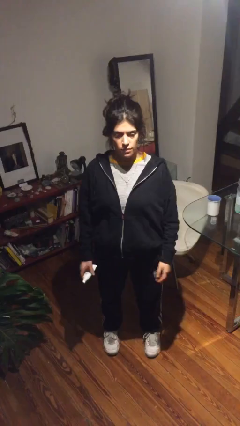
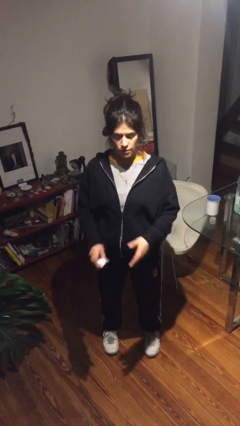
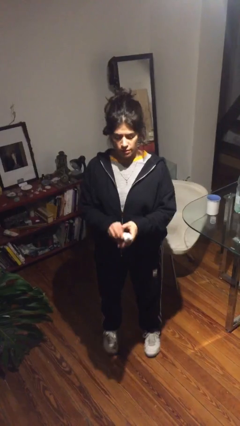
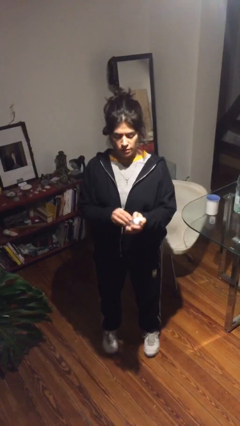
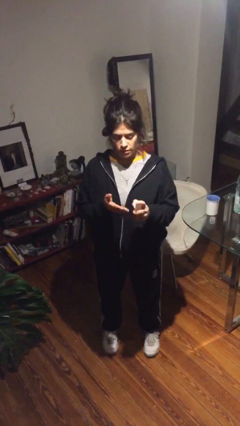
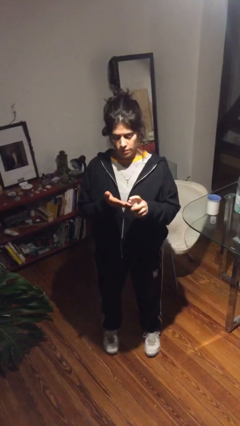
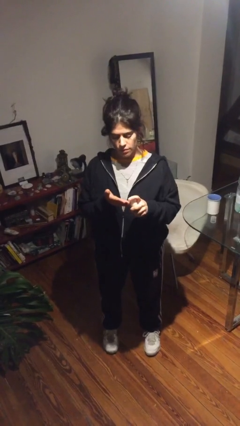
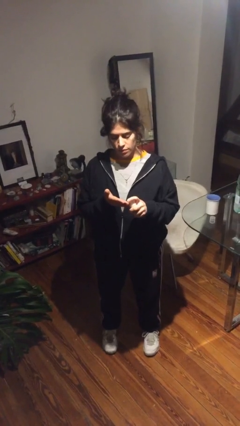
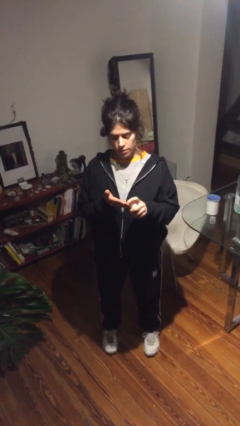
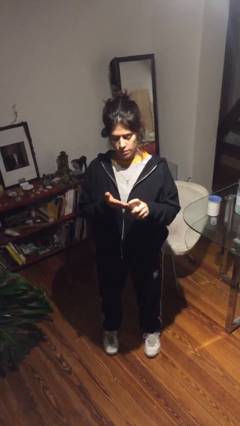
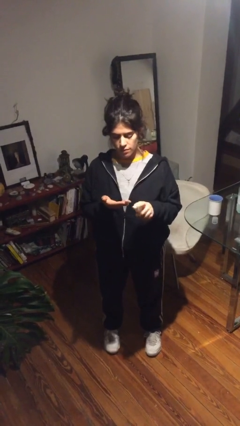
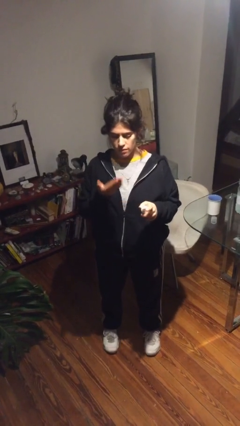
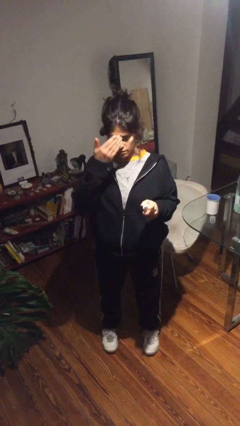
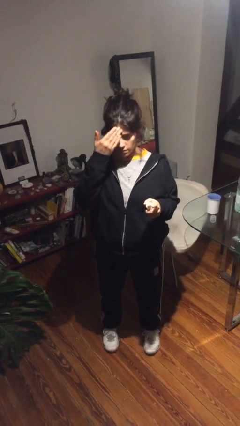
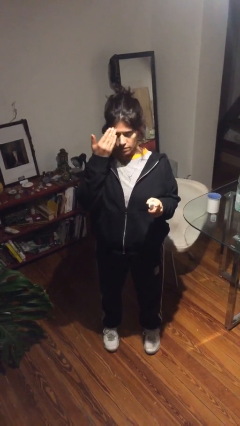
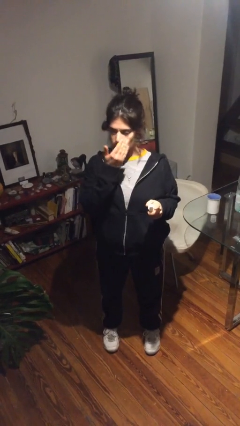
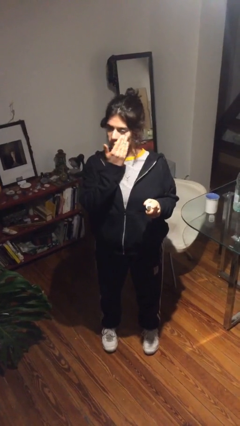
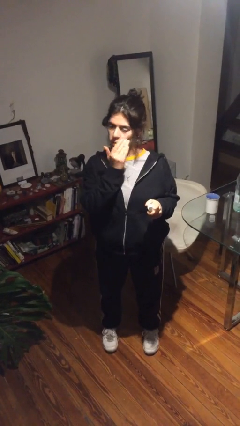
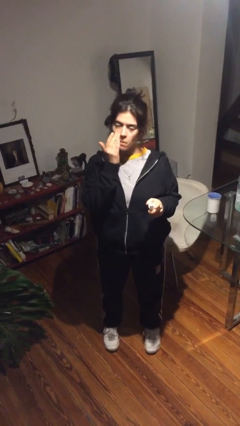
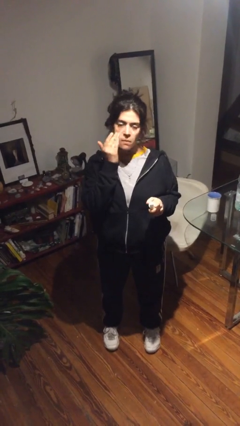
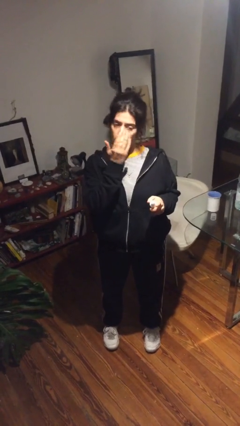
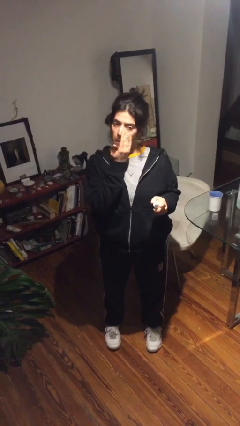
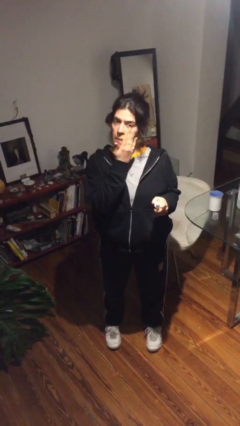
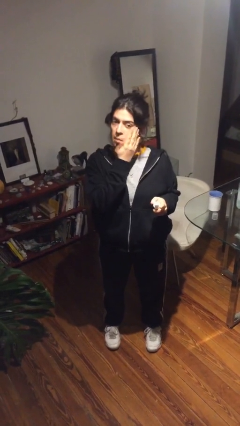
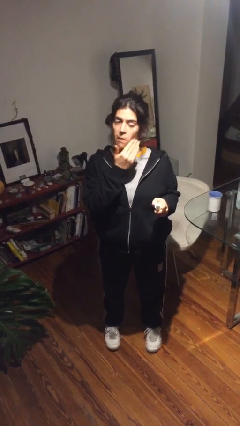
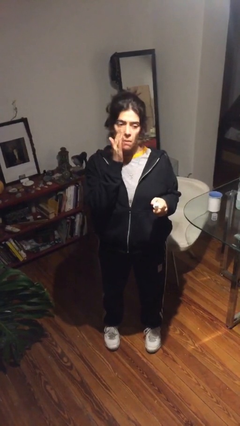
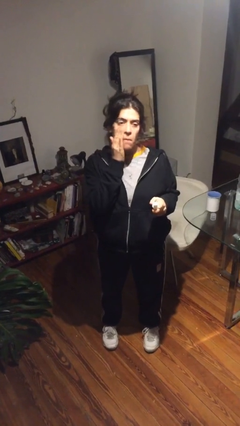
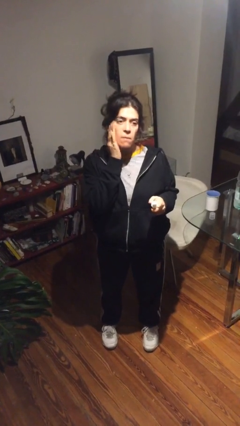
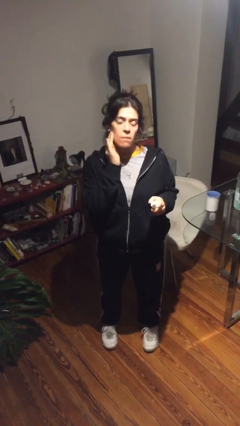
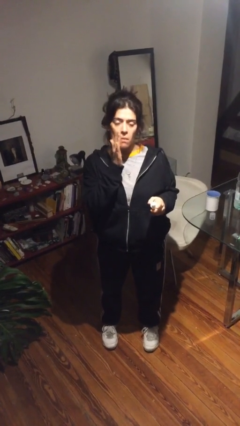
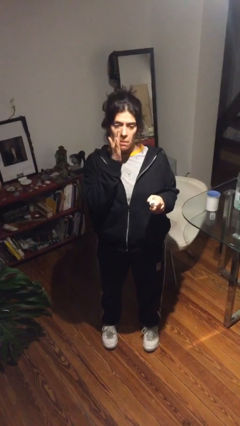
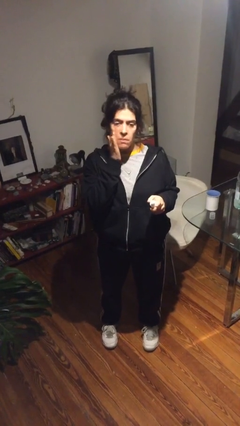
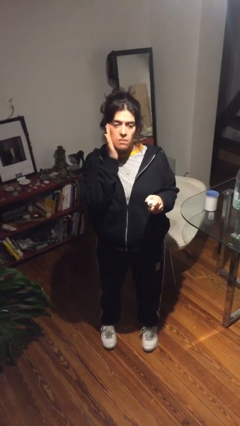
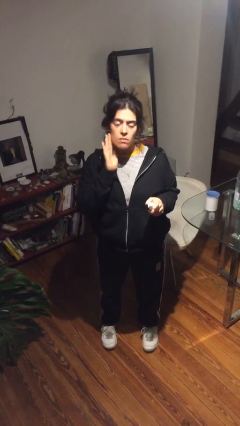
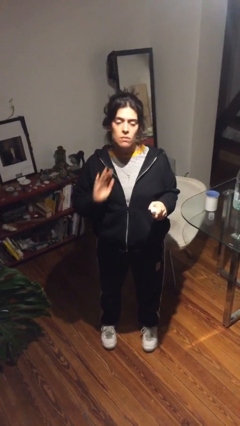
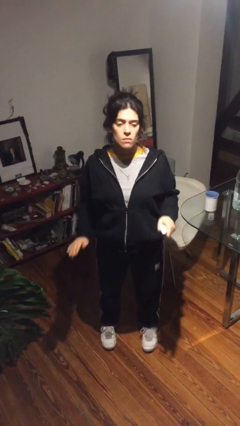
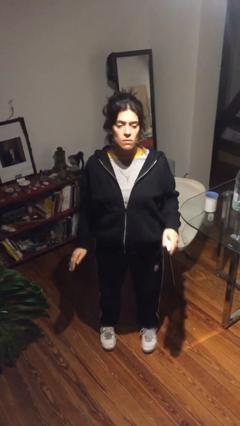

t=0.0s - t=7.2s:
person applies facial moisturizer

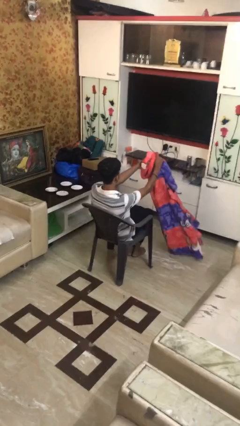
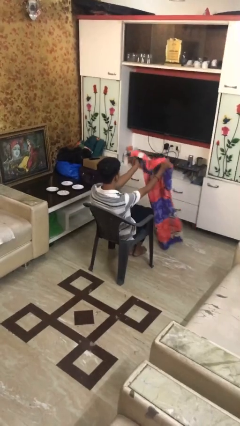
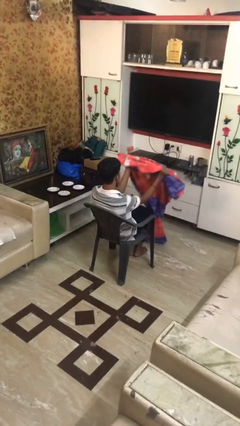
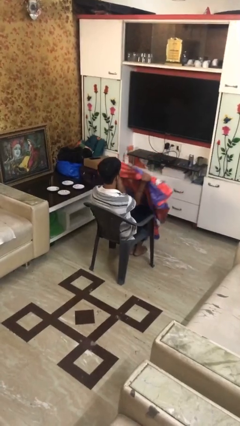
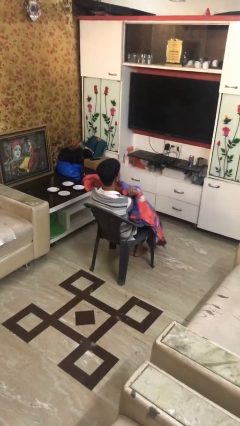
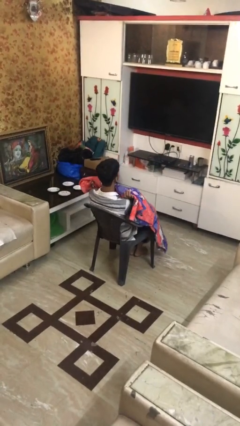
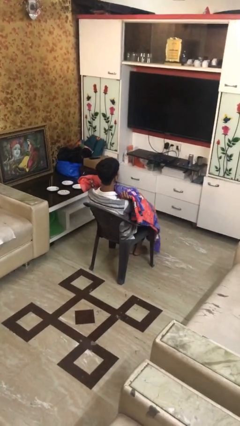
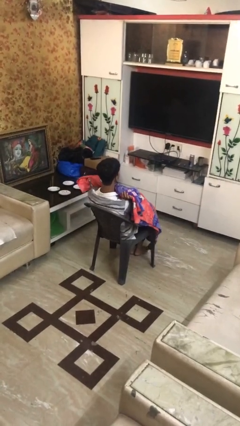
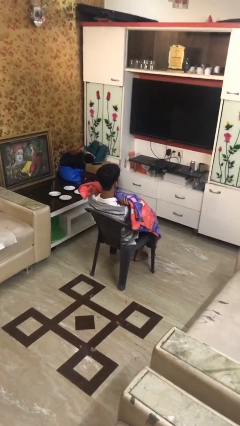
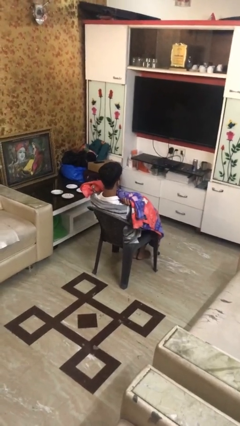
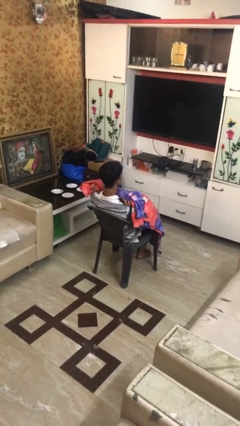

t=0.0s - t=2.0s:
person covers with blanket

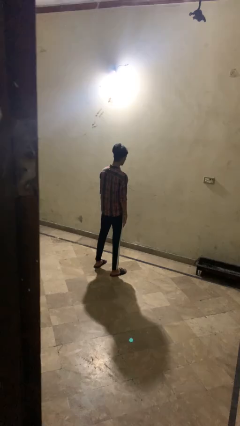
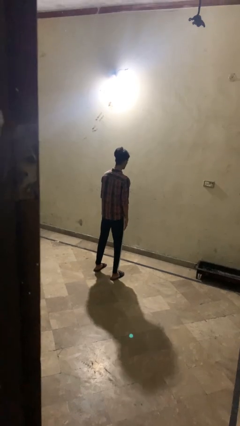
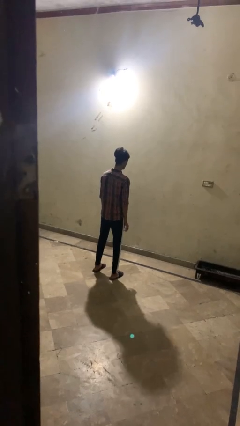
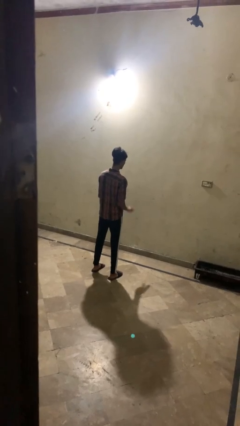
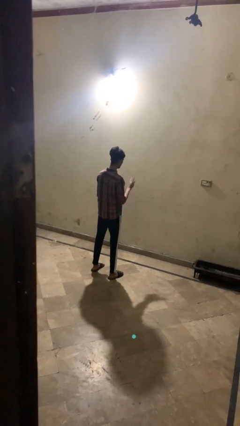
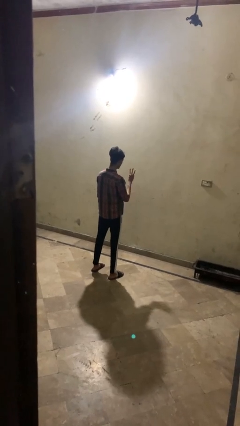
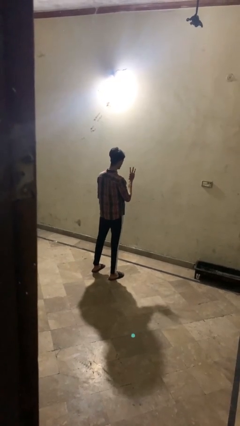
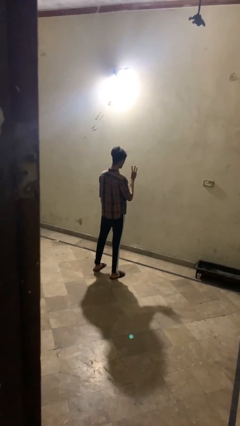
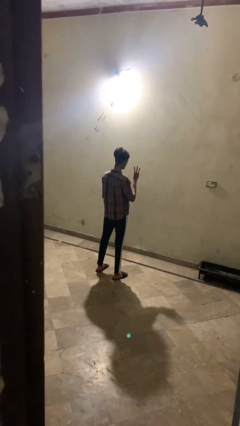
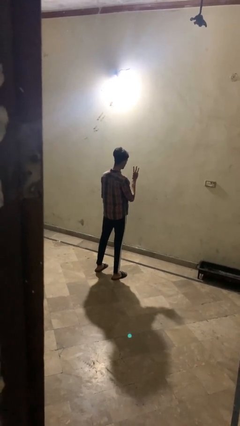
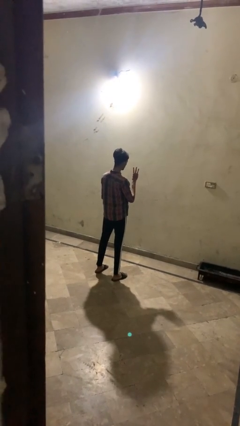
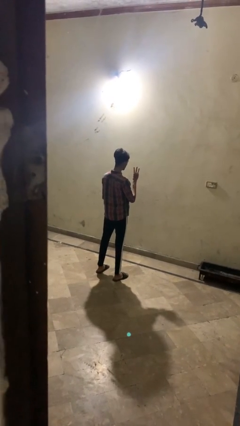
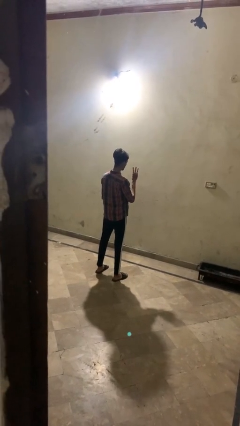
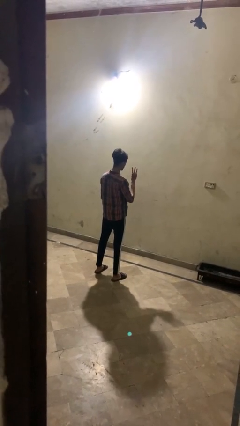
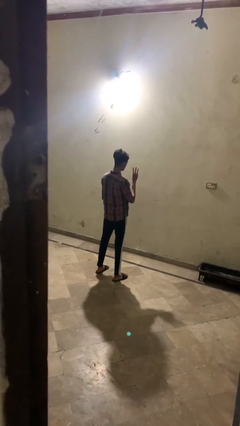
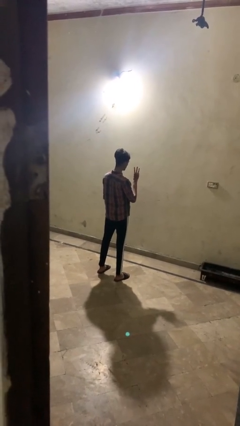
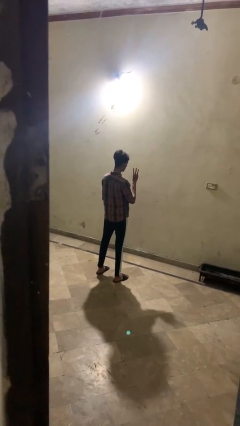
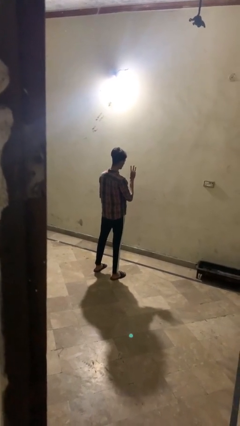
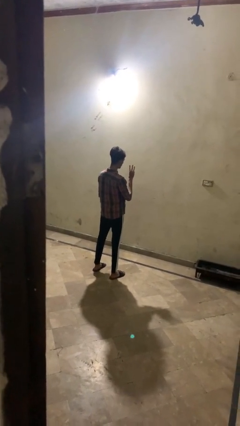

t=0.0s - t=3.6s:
person gestures number three

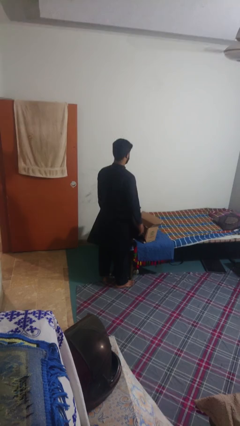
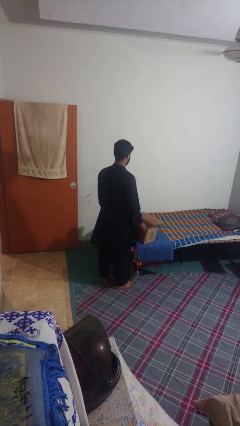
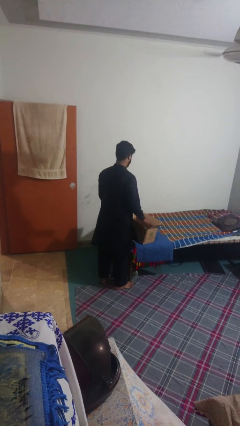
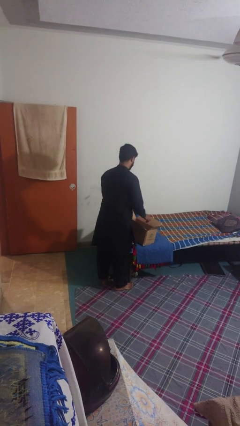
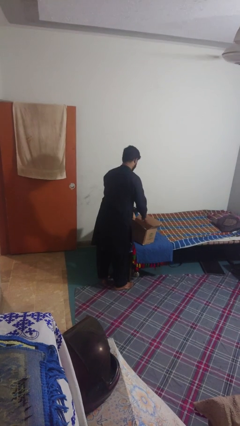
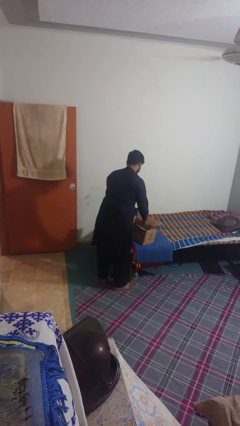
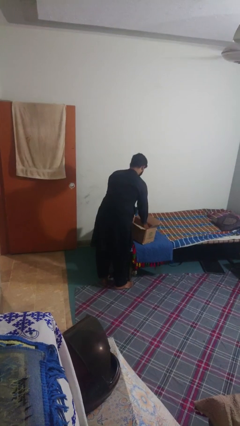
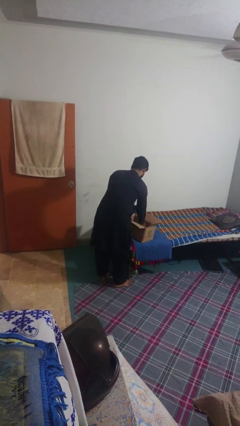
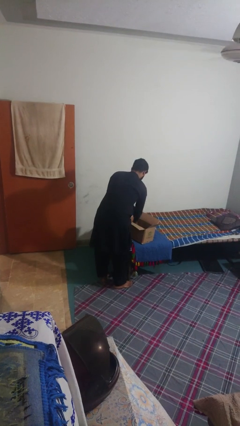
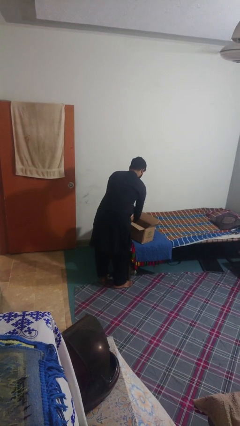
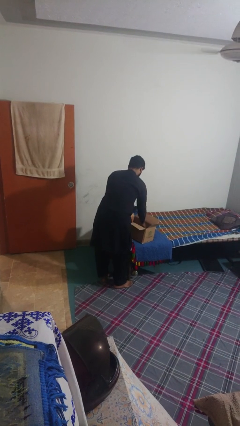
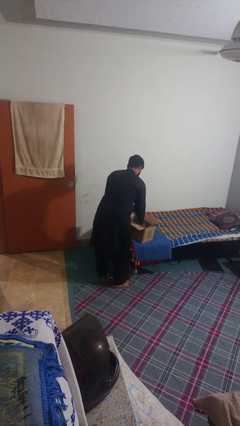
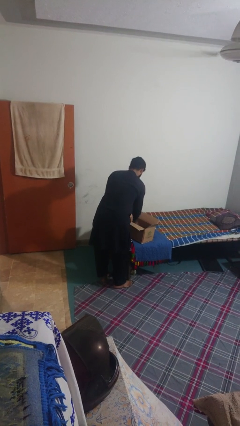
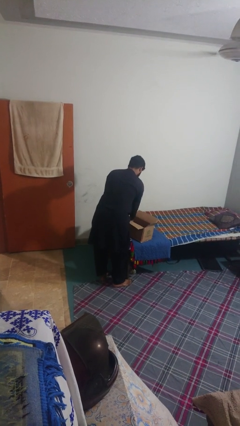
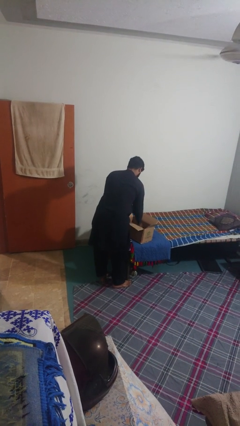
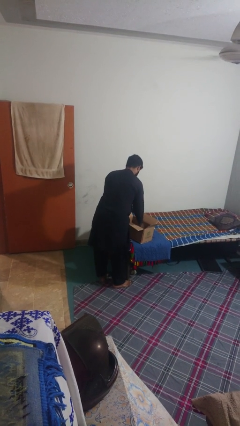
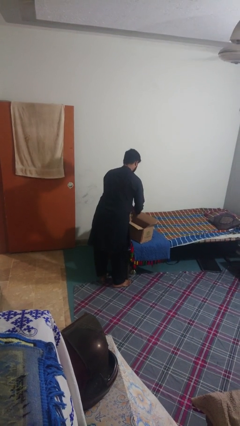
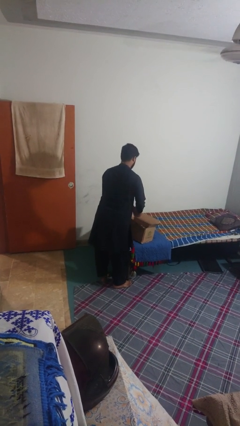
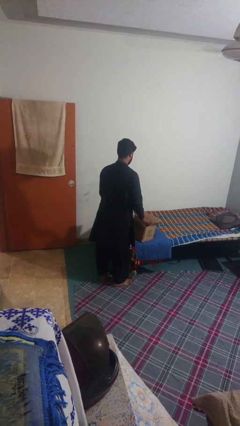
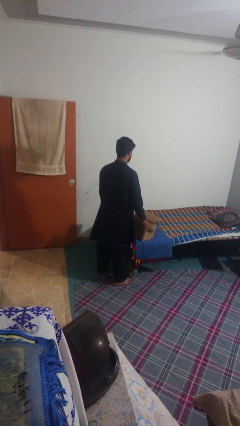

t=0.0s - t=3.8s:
person searches in box

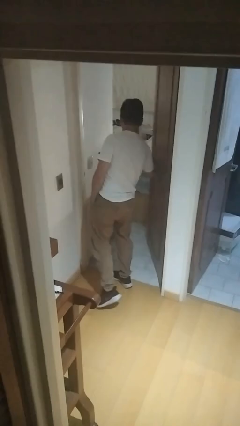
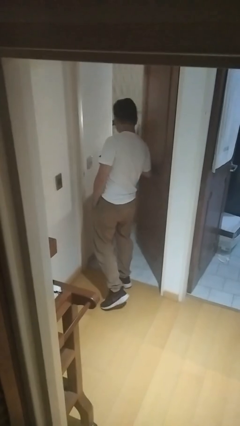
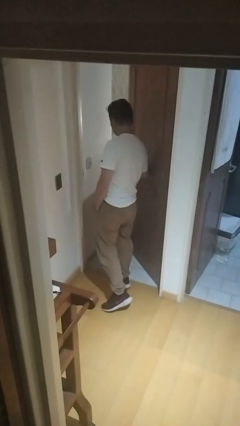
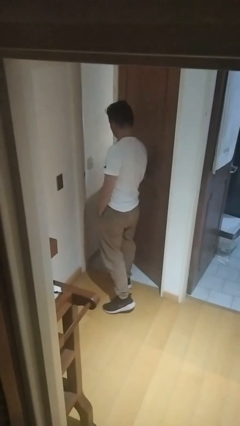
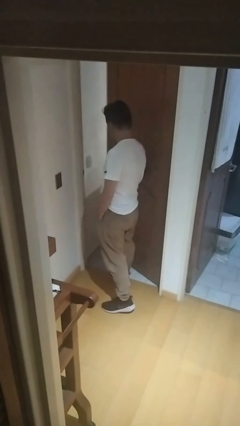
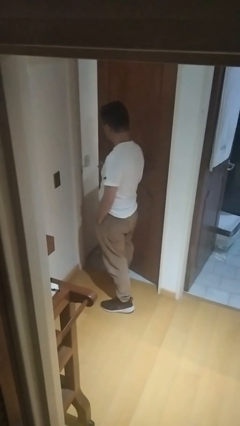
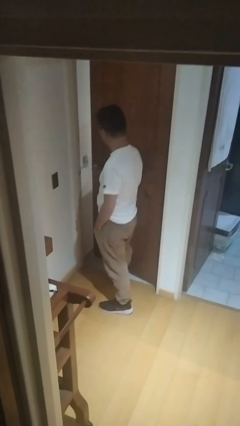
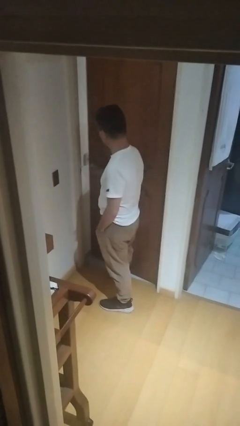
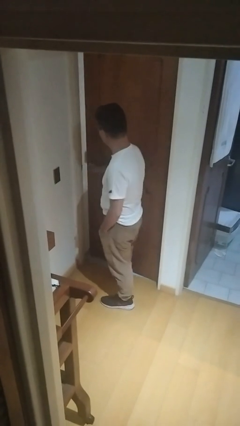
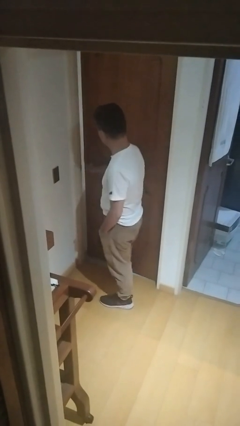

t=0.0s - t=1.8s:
person closes facility door
